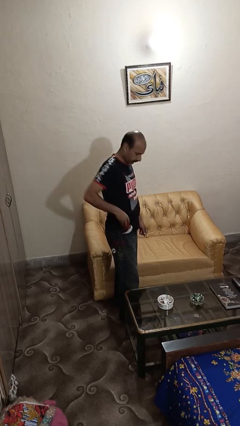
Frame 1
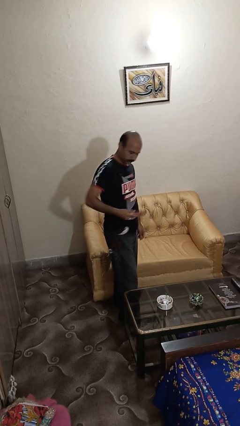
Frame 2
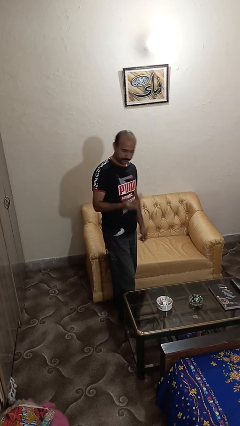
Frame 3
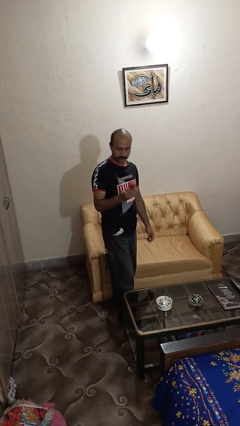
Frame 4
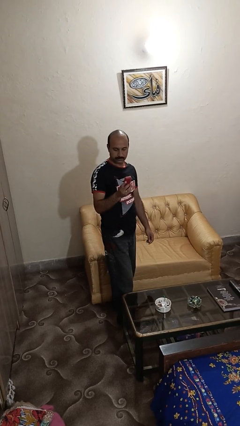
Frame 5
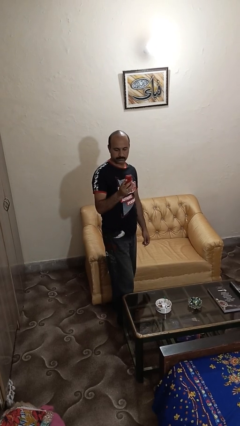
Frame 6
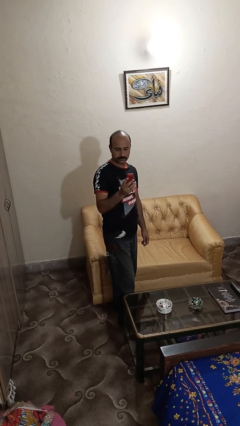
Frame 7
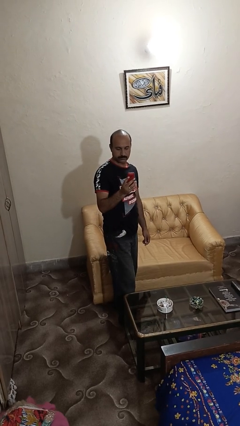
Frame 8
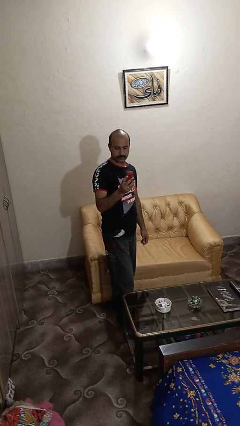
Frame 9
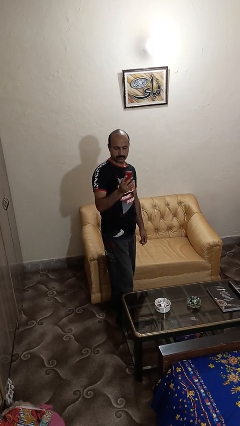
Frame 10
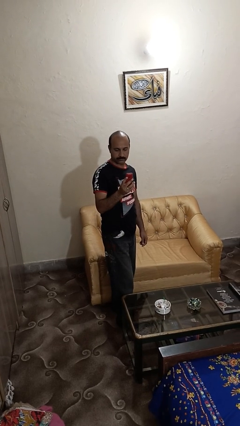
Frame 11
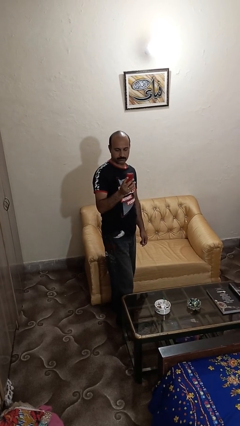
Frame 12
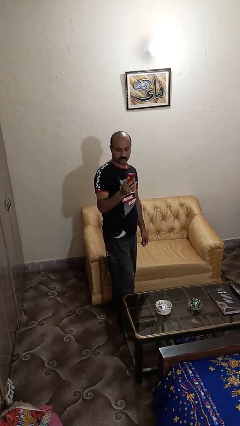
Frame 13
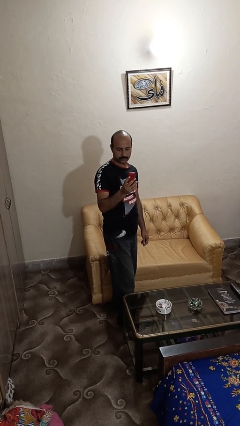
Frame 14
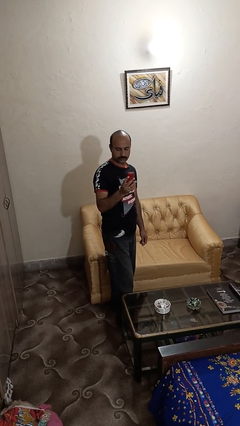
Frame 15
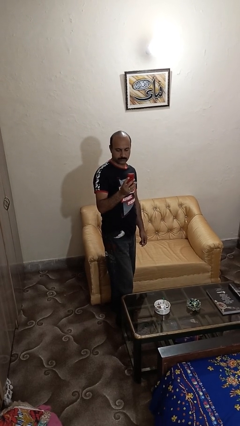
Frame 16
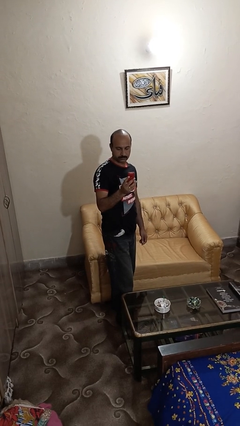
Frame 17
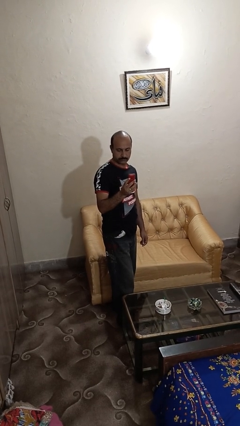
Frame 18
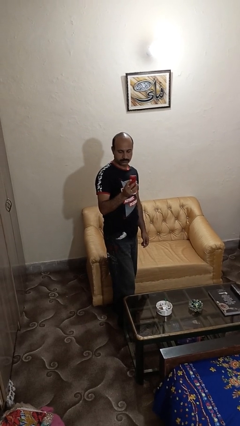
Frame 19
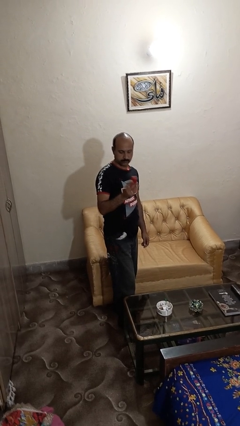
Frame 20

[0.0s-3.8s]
person takes phone from pocket

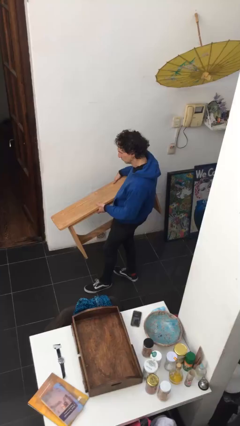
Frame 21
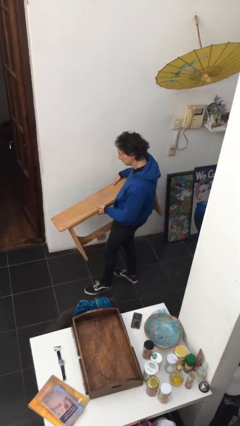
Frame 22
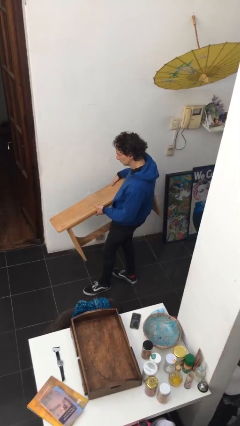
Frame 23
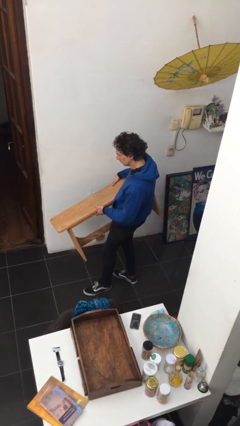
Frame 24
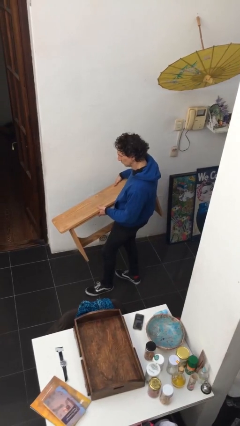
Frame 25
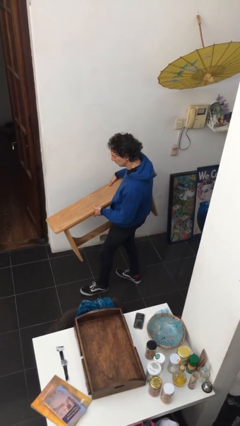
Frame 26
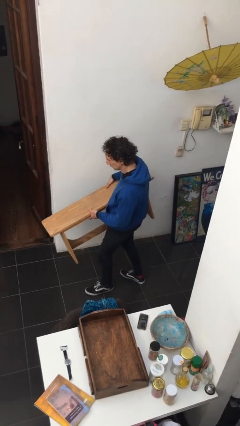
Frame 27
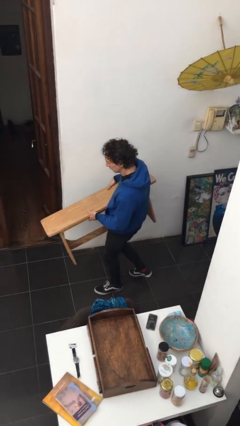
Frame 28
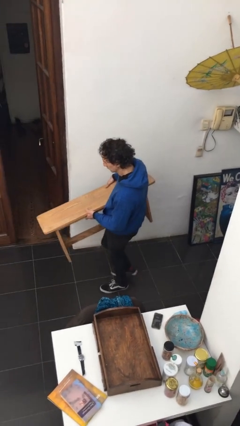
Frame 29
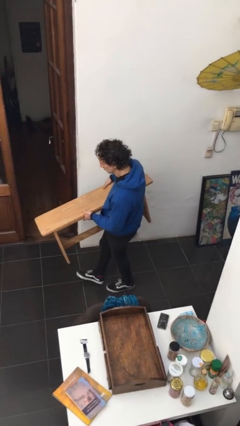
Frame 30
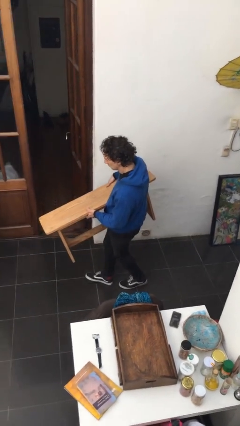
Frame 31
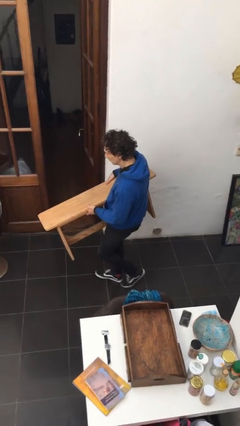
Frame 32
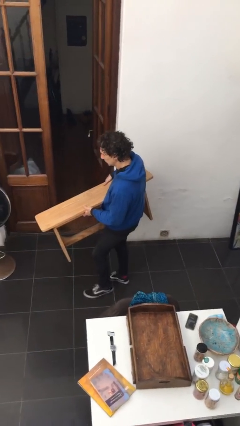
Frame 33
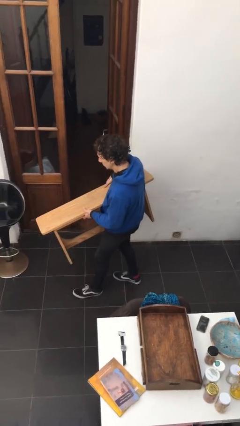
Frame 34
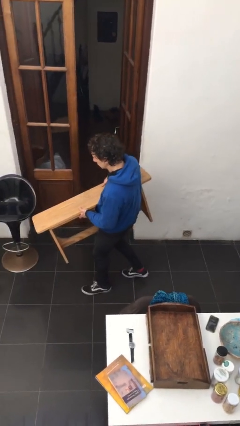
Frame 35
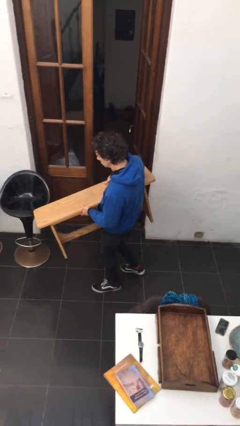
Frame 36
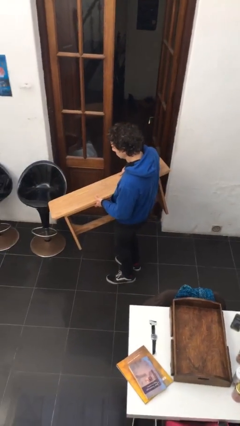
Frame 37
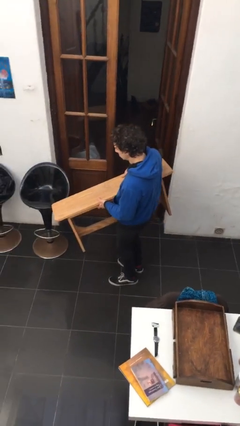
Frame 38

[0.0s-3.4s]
person carries furniture

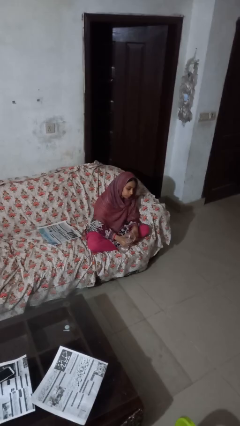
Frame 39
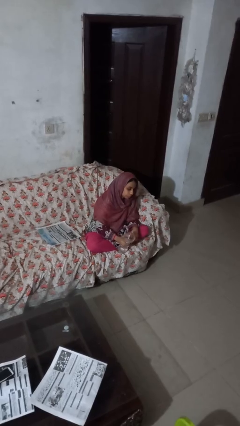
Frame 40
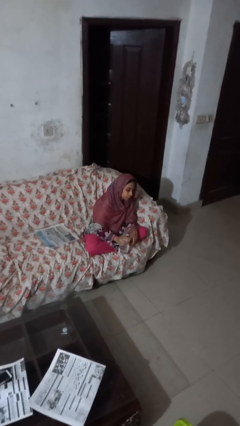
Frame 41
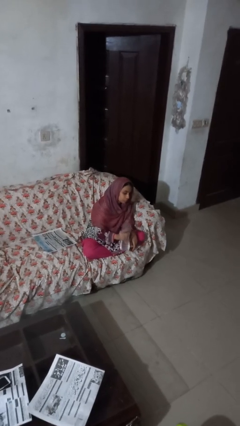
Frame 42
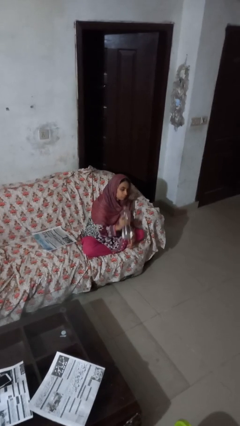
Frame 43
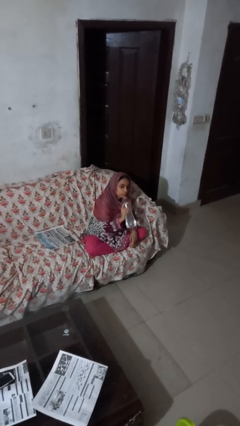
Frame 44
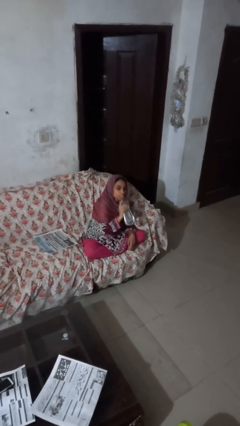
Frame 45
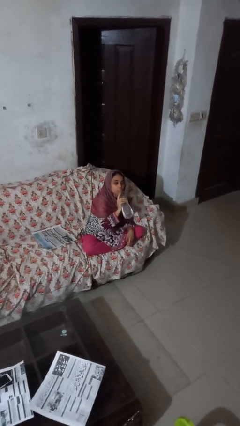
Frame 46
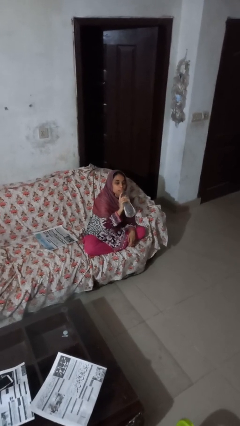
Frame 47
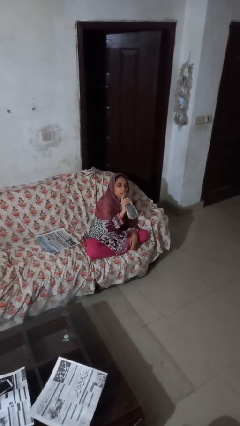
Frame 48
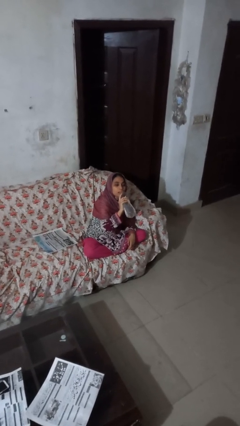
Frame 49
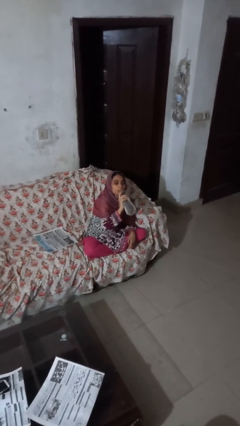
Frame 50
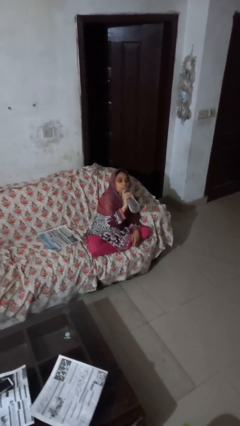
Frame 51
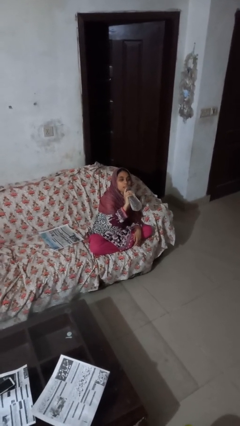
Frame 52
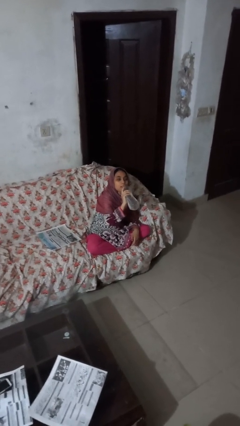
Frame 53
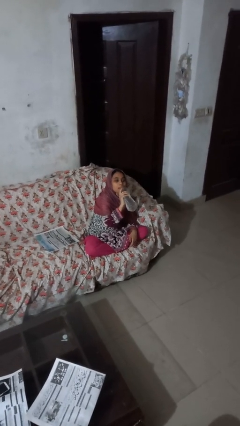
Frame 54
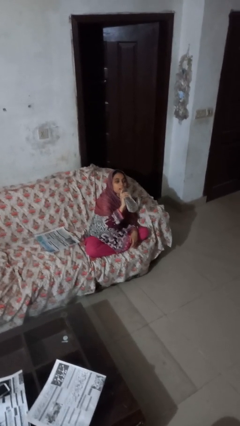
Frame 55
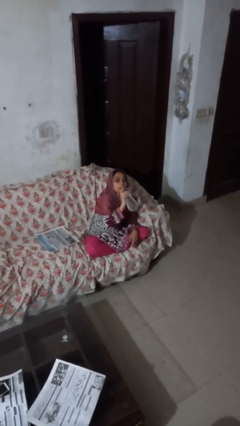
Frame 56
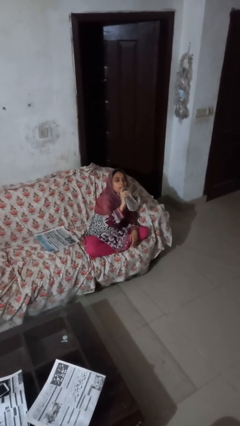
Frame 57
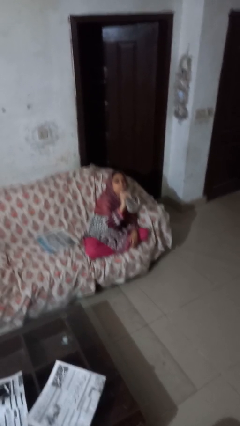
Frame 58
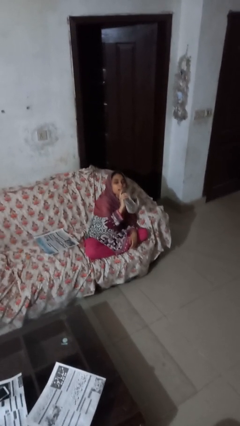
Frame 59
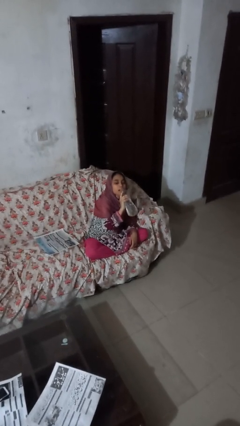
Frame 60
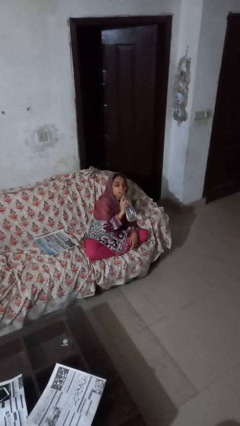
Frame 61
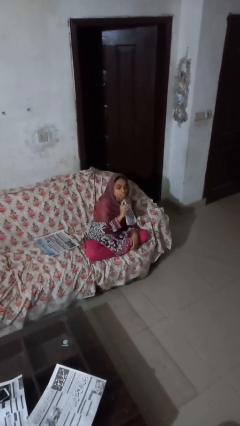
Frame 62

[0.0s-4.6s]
person drinks from bottle

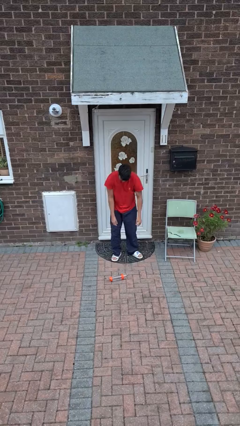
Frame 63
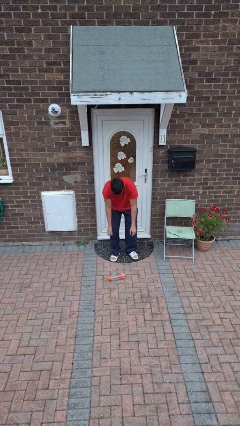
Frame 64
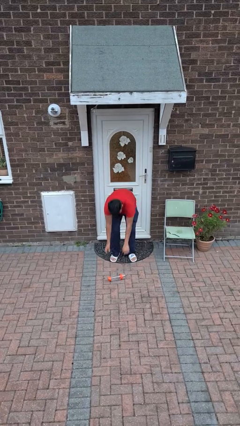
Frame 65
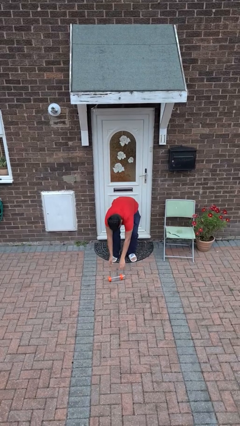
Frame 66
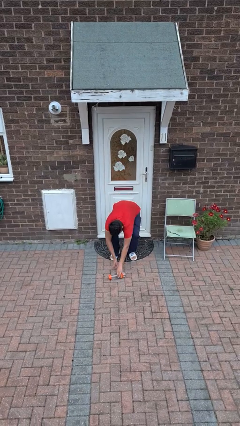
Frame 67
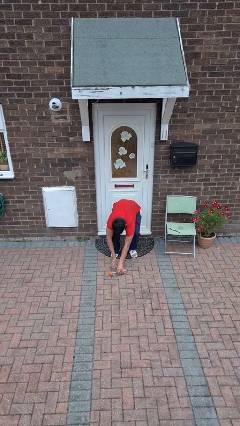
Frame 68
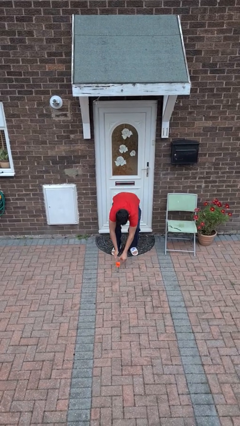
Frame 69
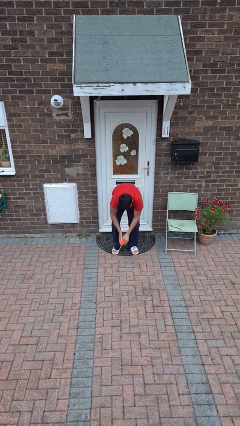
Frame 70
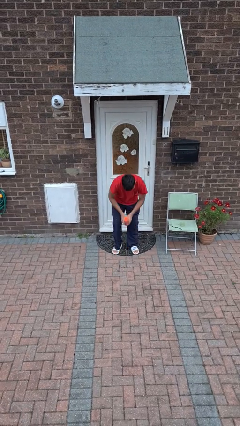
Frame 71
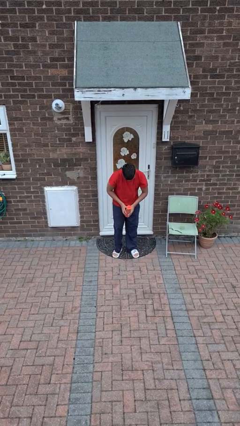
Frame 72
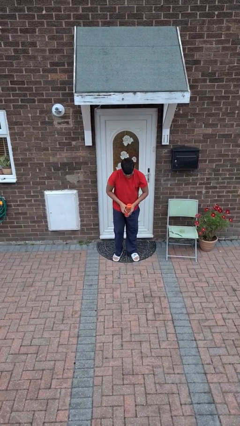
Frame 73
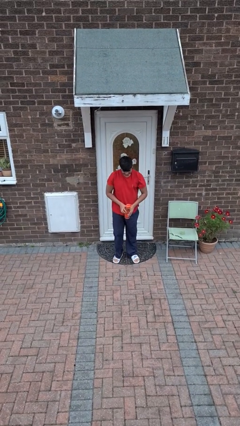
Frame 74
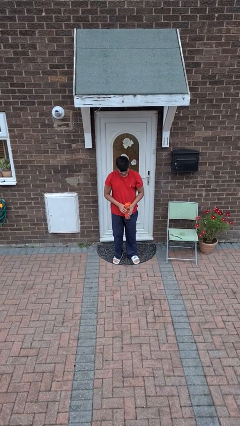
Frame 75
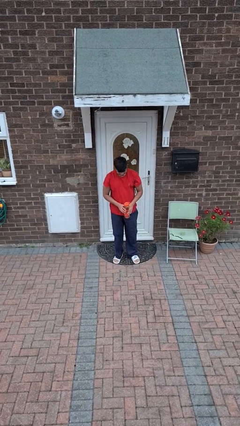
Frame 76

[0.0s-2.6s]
person picks up object from floor

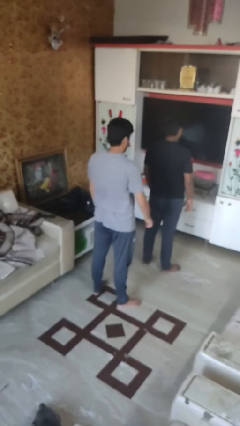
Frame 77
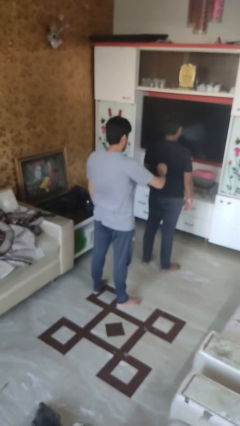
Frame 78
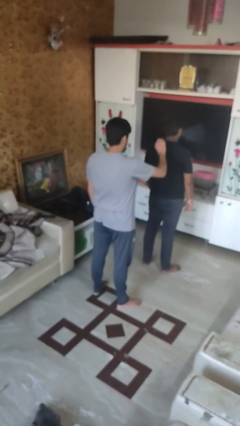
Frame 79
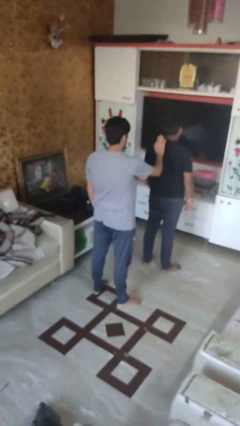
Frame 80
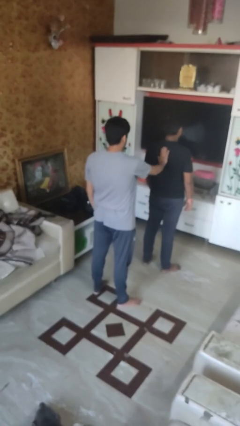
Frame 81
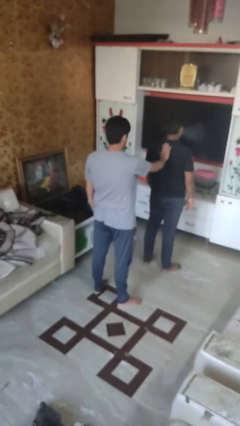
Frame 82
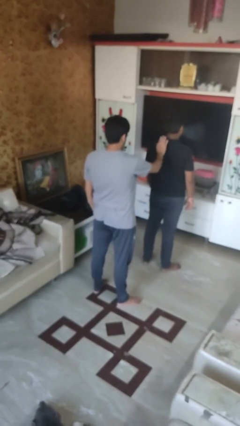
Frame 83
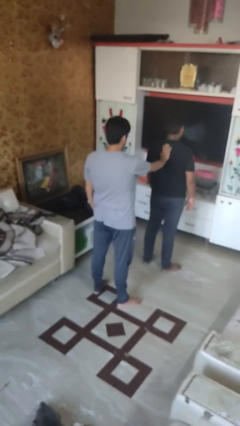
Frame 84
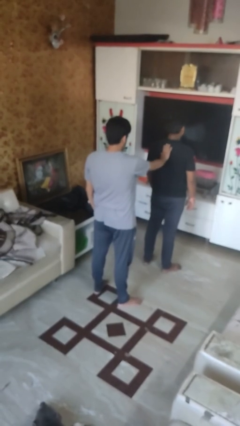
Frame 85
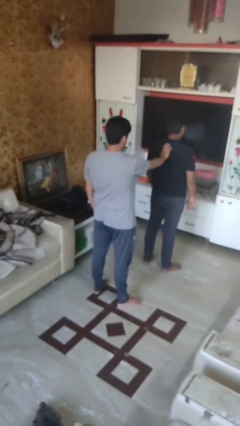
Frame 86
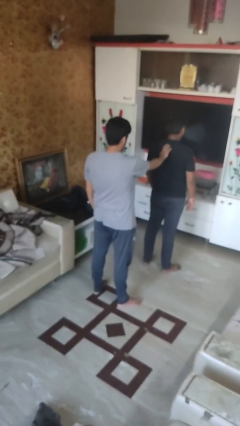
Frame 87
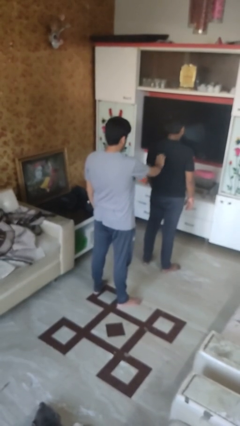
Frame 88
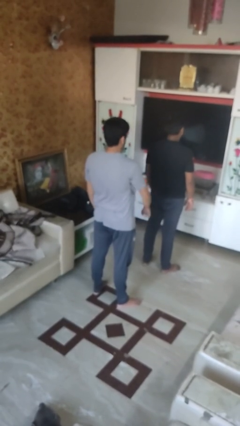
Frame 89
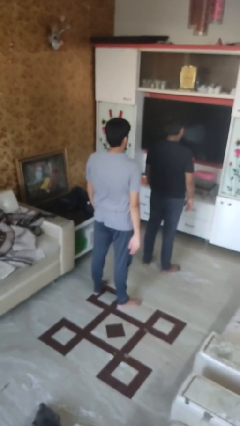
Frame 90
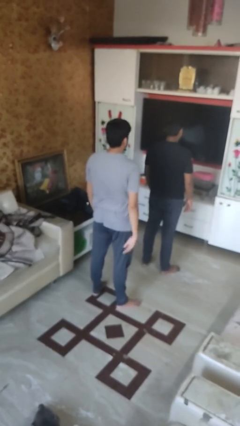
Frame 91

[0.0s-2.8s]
person touches back of person
